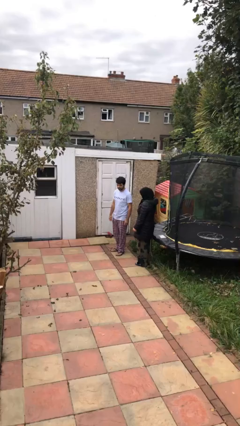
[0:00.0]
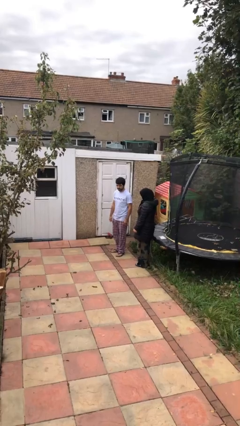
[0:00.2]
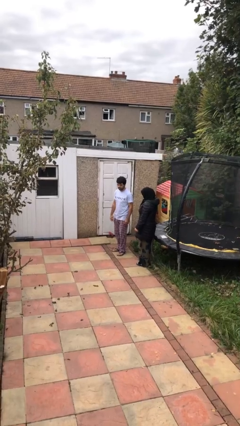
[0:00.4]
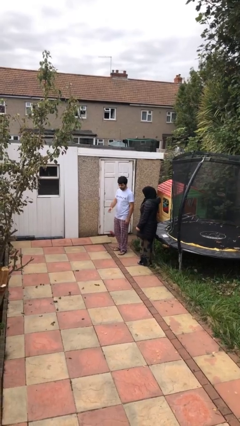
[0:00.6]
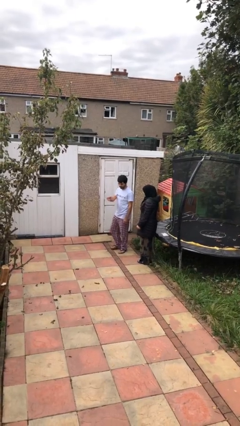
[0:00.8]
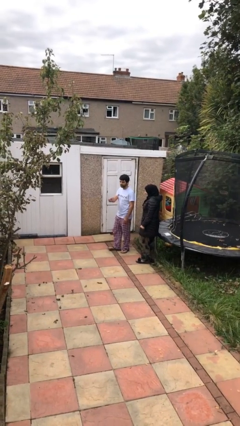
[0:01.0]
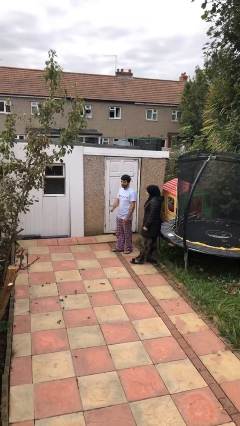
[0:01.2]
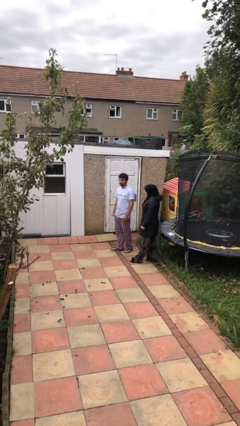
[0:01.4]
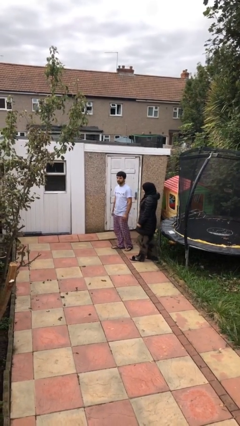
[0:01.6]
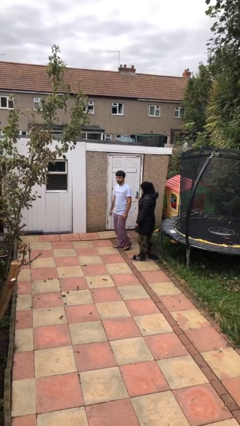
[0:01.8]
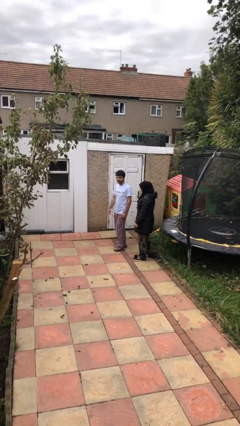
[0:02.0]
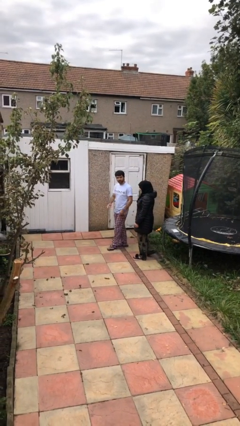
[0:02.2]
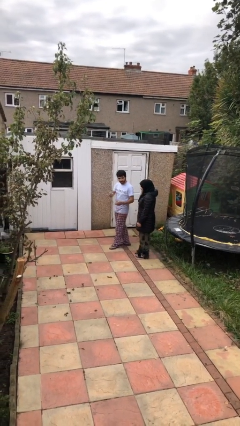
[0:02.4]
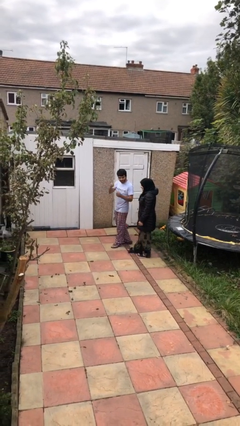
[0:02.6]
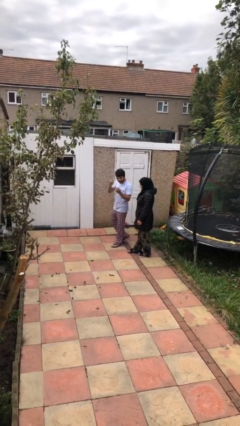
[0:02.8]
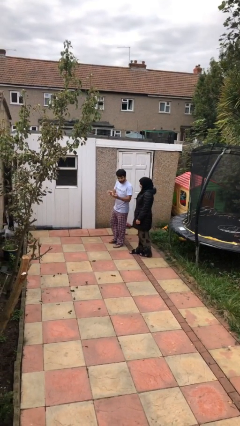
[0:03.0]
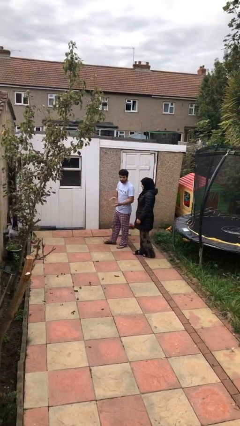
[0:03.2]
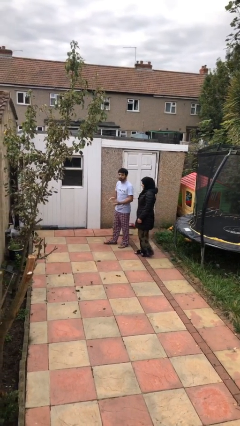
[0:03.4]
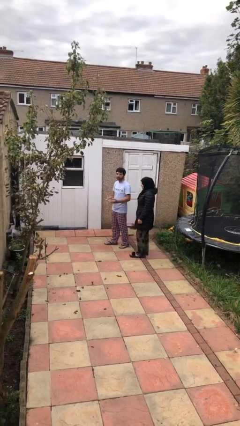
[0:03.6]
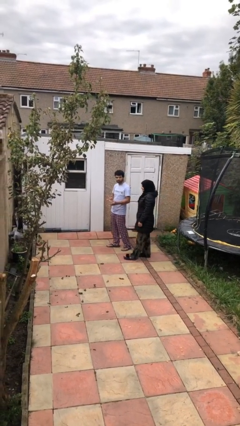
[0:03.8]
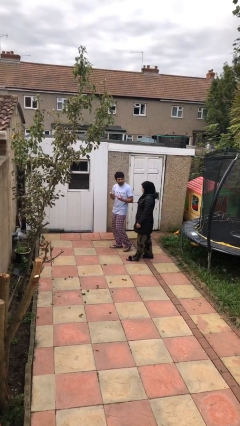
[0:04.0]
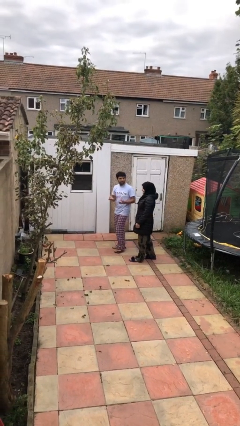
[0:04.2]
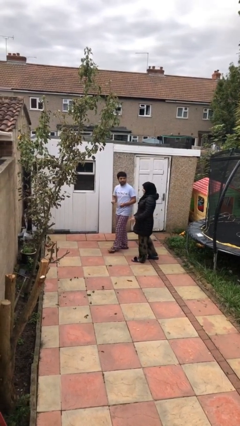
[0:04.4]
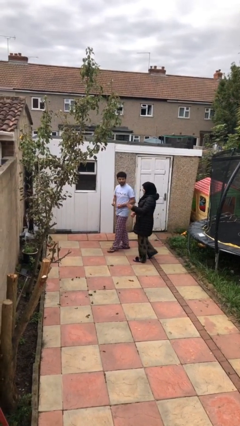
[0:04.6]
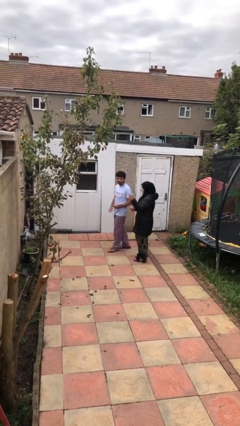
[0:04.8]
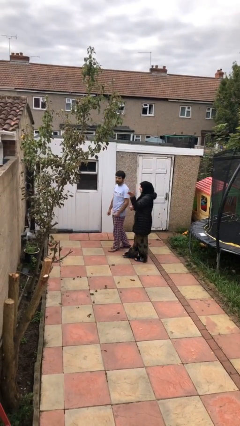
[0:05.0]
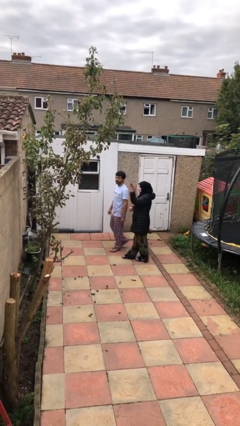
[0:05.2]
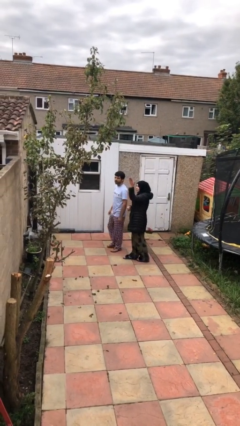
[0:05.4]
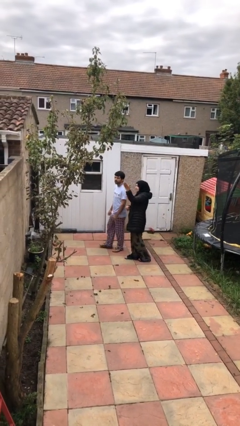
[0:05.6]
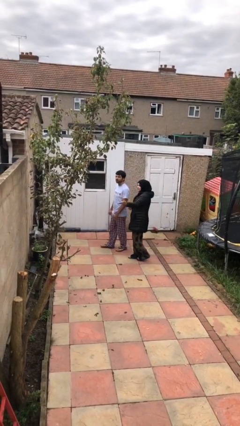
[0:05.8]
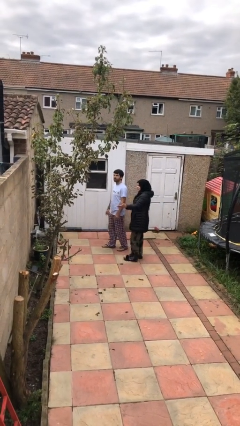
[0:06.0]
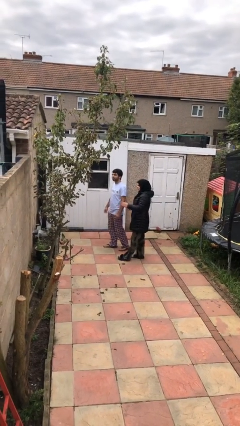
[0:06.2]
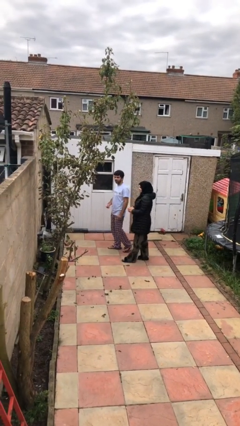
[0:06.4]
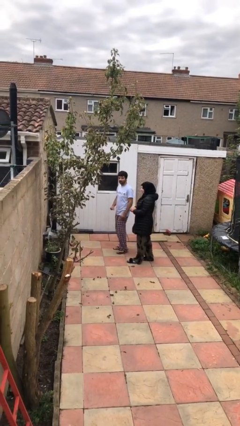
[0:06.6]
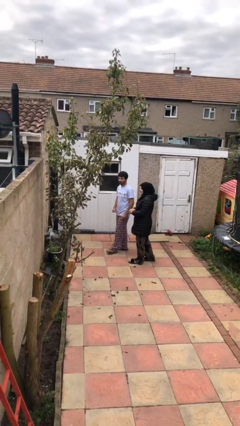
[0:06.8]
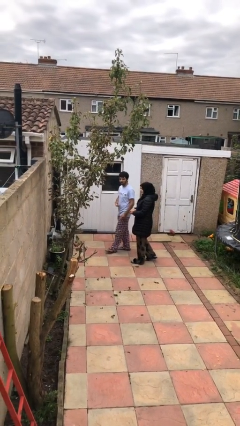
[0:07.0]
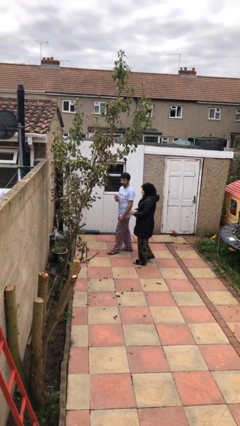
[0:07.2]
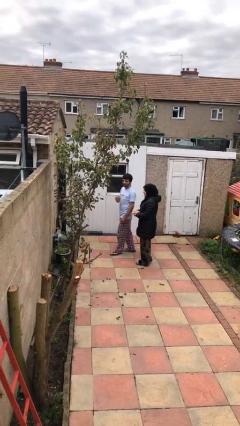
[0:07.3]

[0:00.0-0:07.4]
person talks to person

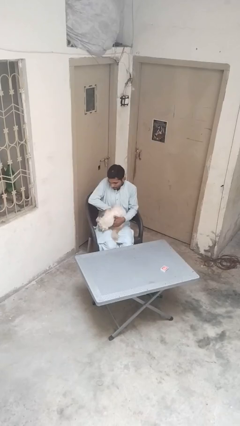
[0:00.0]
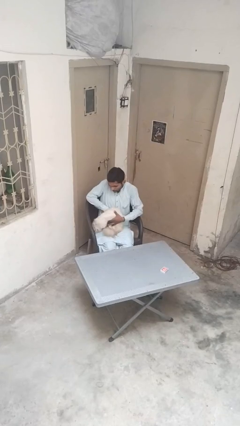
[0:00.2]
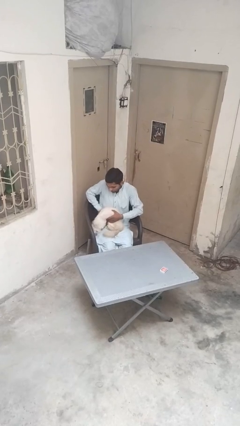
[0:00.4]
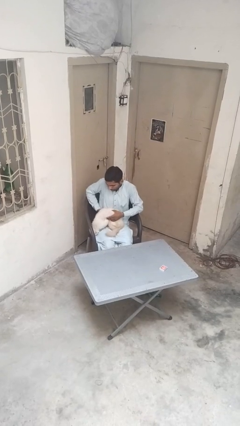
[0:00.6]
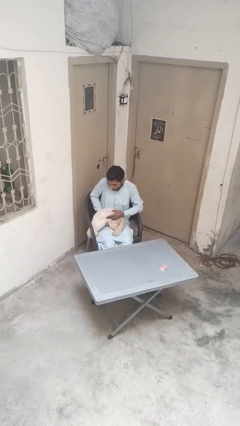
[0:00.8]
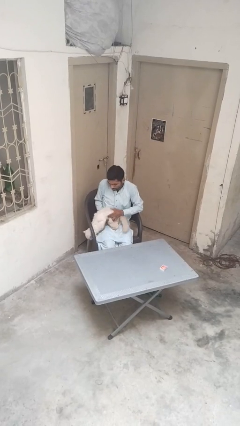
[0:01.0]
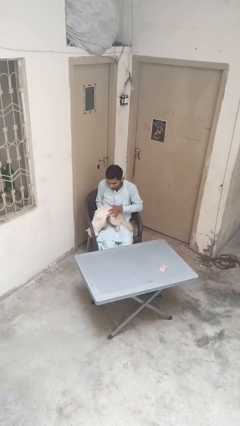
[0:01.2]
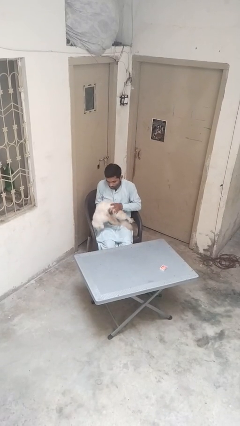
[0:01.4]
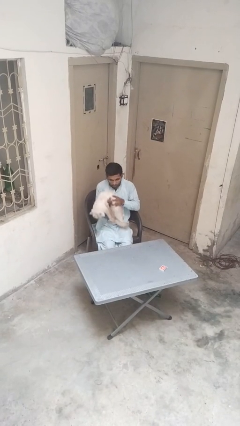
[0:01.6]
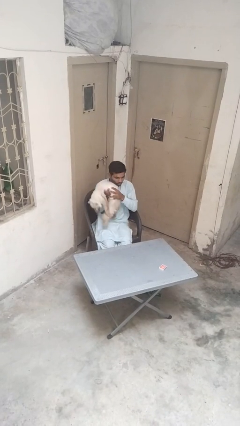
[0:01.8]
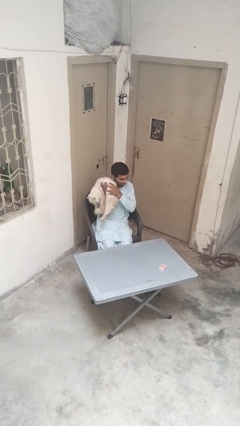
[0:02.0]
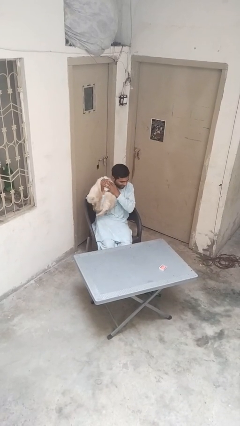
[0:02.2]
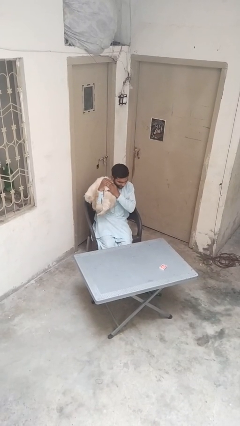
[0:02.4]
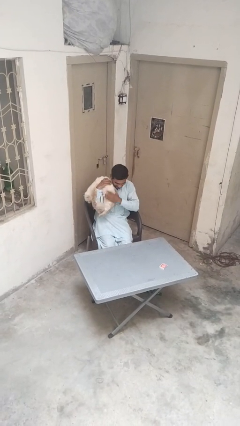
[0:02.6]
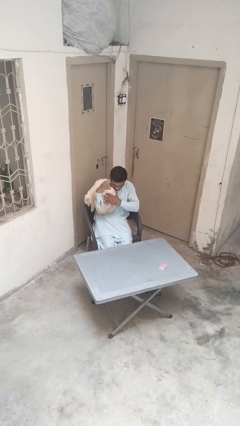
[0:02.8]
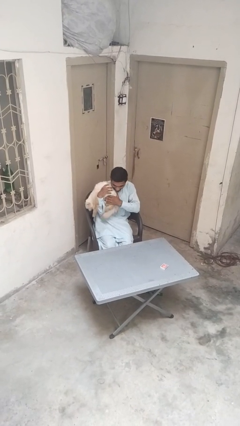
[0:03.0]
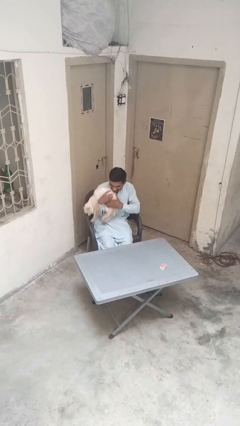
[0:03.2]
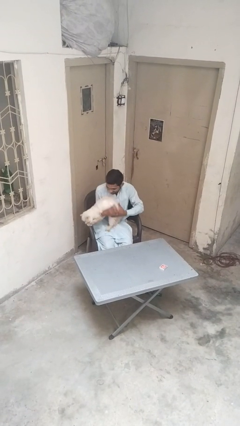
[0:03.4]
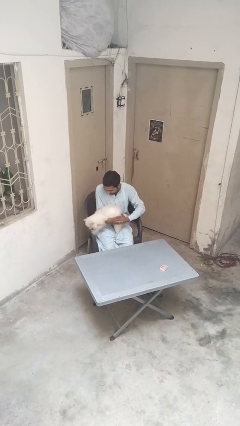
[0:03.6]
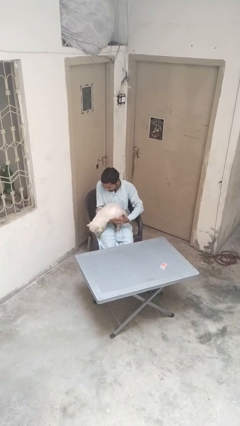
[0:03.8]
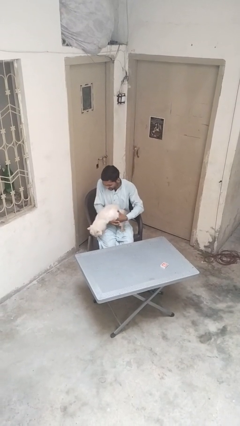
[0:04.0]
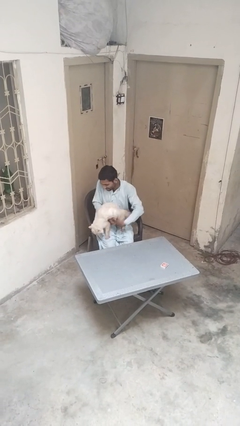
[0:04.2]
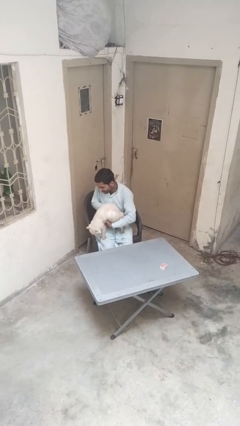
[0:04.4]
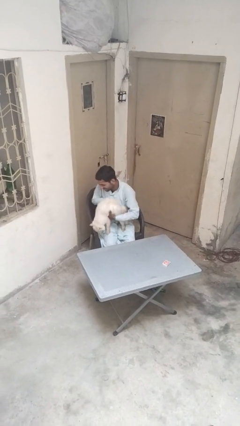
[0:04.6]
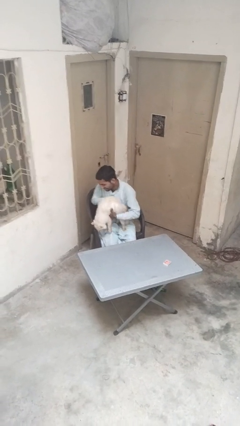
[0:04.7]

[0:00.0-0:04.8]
person hugs cat

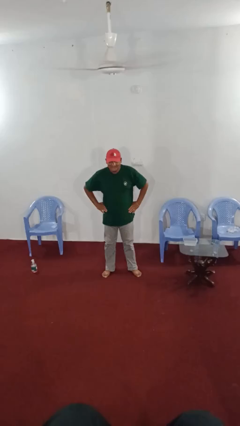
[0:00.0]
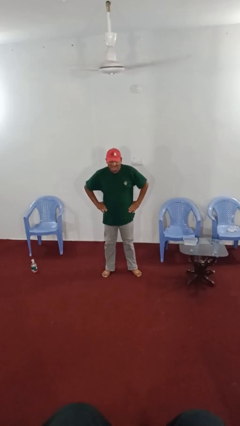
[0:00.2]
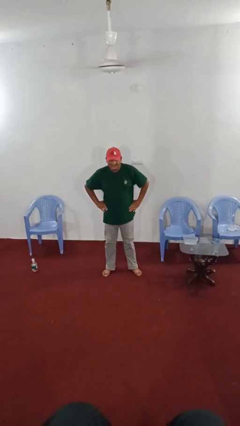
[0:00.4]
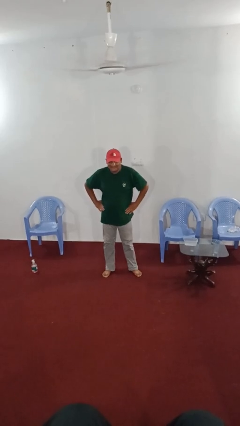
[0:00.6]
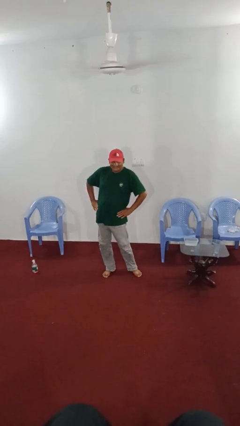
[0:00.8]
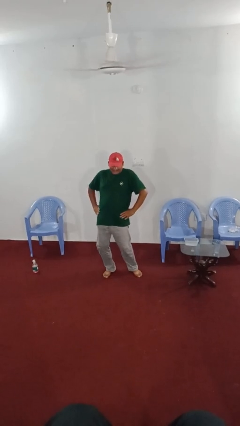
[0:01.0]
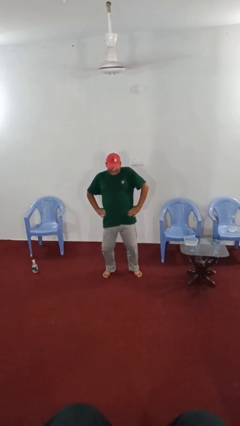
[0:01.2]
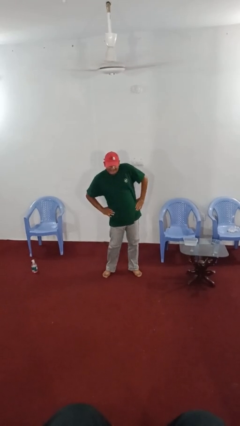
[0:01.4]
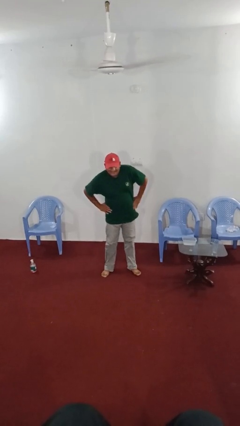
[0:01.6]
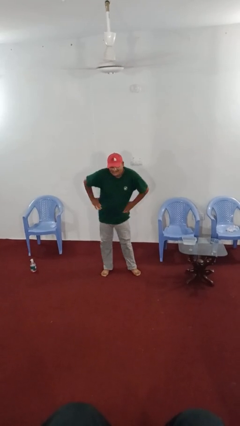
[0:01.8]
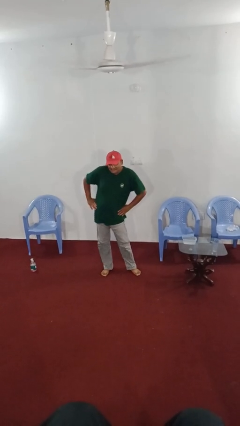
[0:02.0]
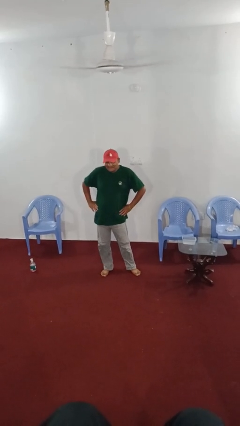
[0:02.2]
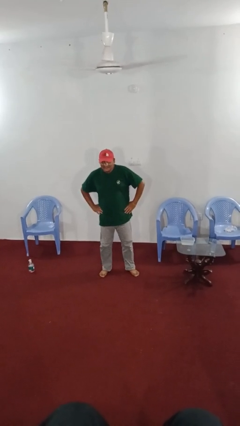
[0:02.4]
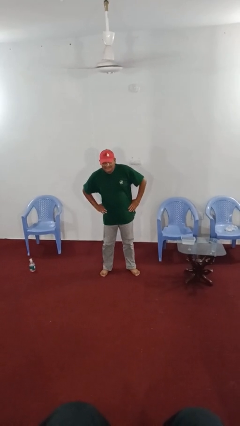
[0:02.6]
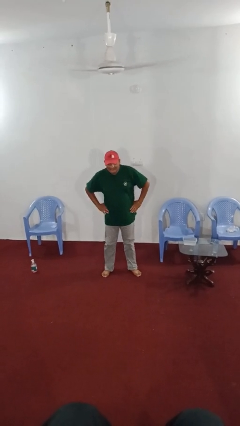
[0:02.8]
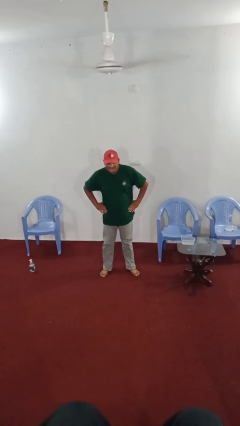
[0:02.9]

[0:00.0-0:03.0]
person wiggles hips

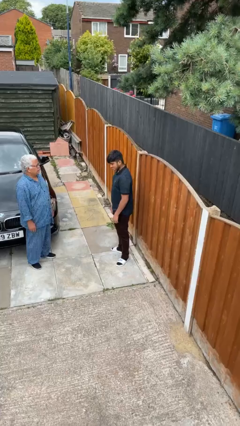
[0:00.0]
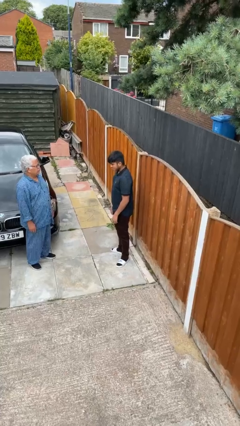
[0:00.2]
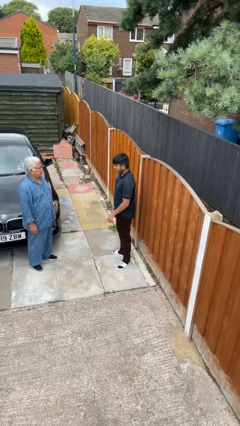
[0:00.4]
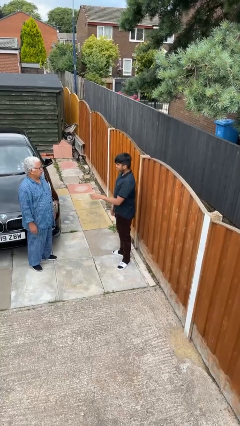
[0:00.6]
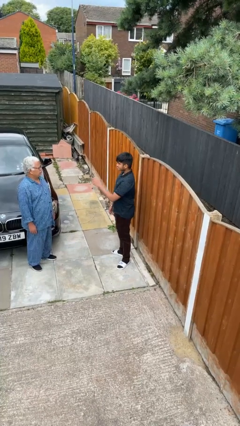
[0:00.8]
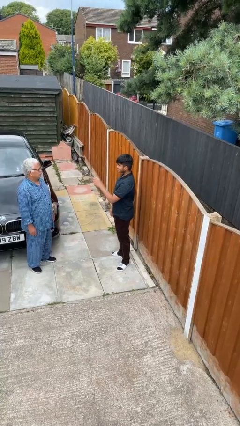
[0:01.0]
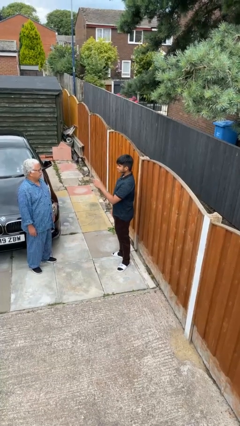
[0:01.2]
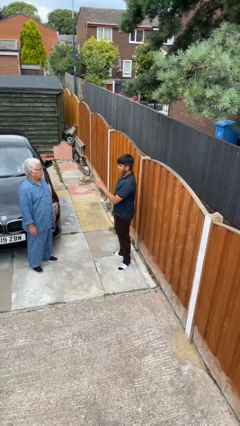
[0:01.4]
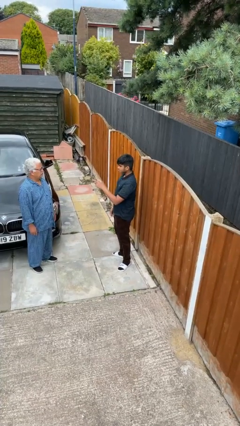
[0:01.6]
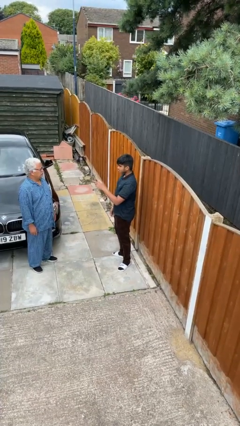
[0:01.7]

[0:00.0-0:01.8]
person points at person

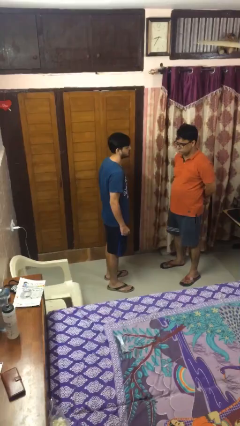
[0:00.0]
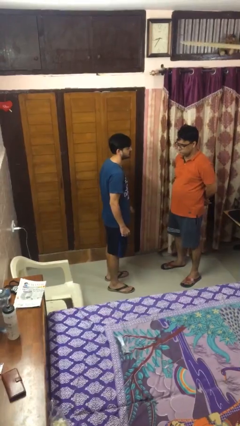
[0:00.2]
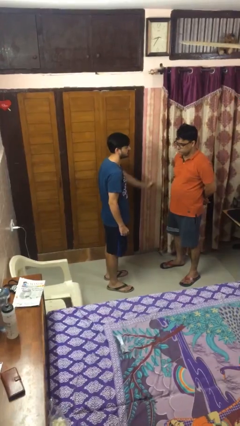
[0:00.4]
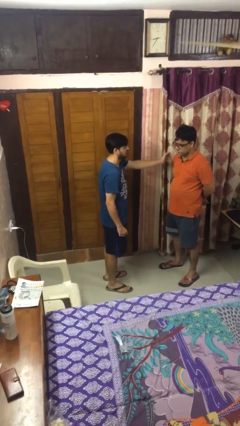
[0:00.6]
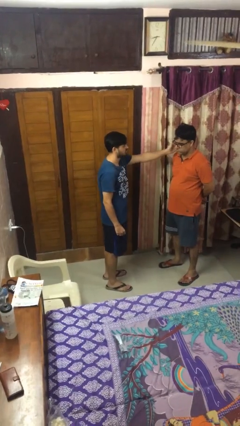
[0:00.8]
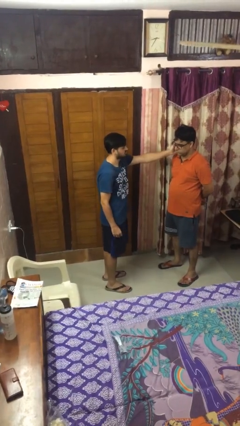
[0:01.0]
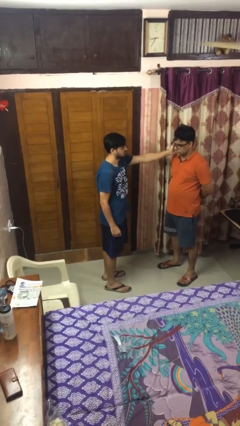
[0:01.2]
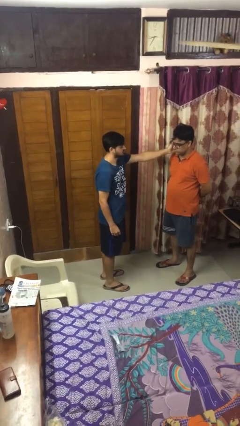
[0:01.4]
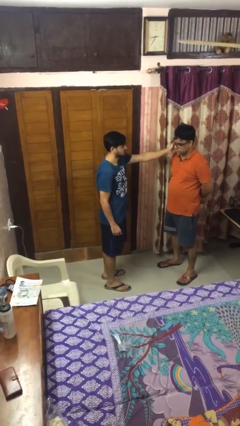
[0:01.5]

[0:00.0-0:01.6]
person touches face of person
